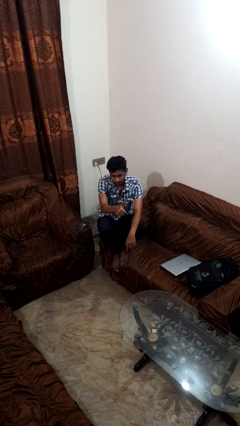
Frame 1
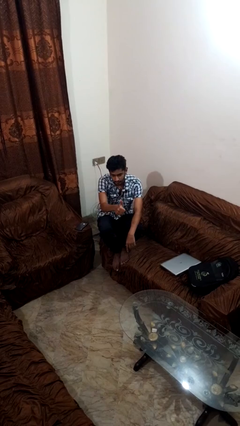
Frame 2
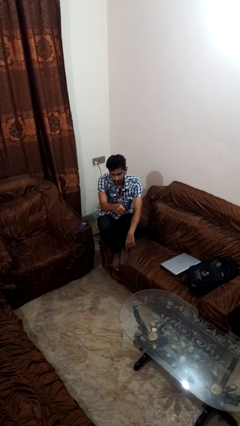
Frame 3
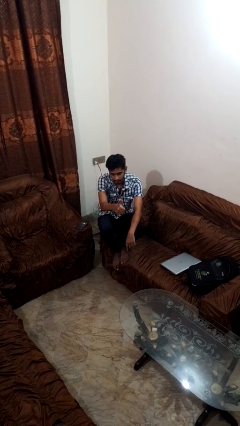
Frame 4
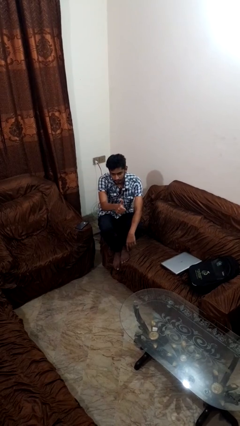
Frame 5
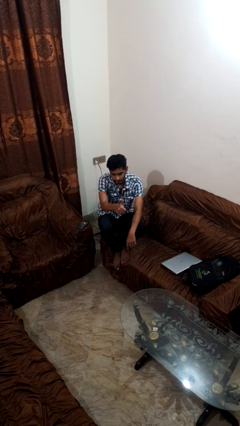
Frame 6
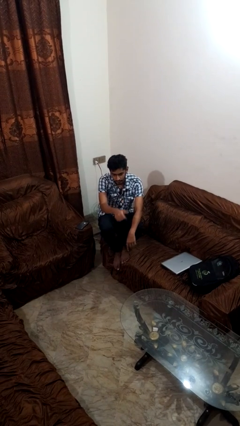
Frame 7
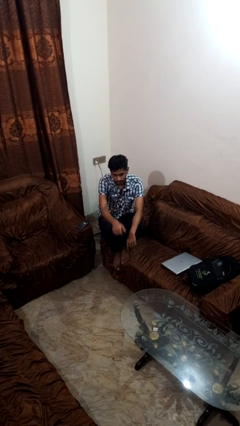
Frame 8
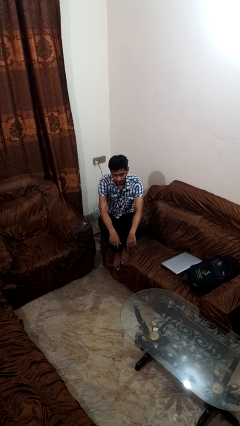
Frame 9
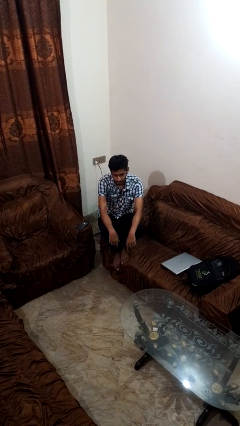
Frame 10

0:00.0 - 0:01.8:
person gestures thumbs up

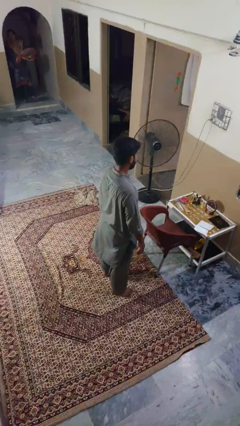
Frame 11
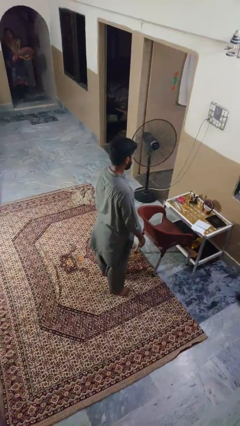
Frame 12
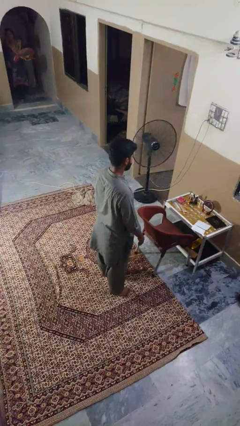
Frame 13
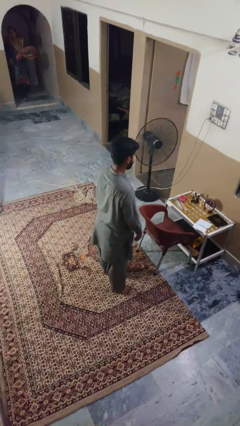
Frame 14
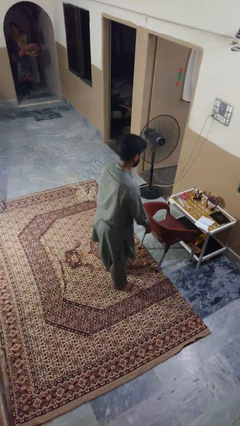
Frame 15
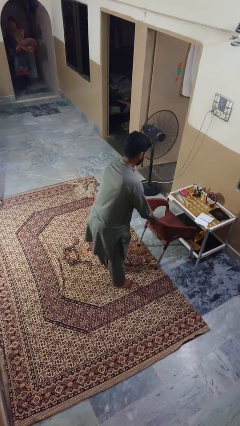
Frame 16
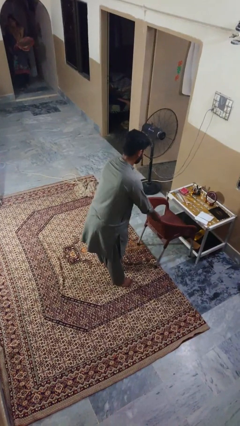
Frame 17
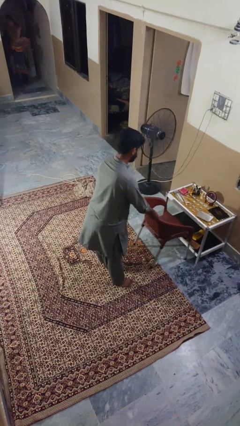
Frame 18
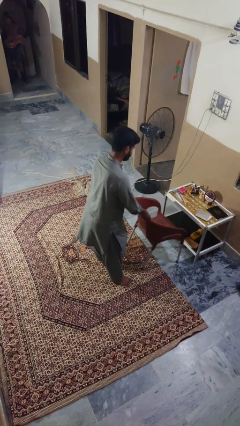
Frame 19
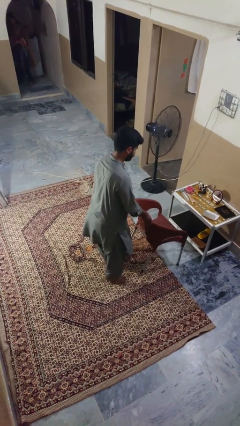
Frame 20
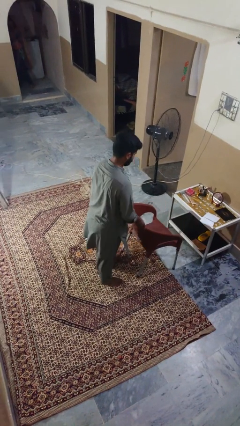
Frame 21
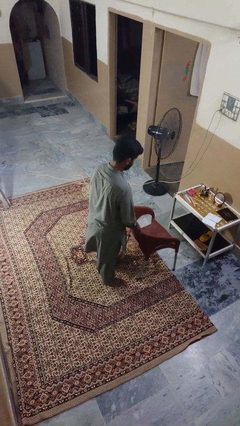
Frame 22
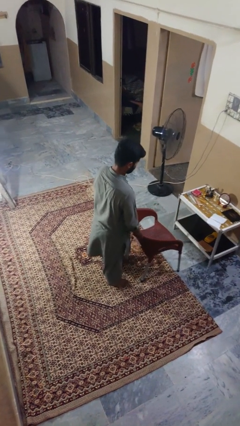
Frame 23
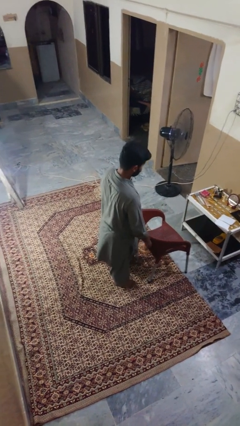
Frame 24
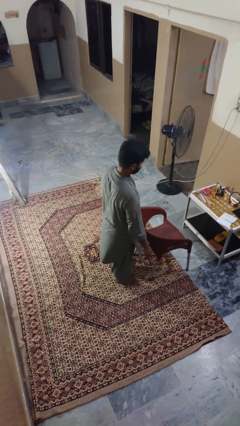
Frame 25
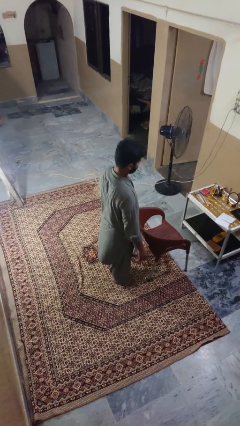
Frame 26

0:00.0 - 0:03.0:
person pulls out chair

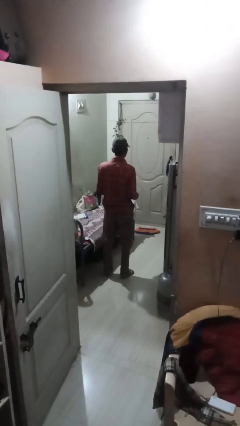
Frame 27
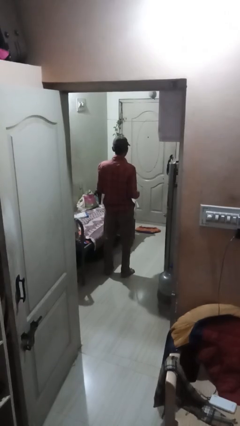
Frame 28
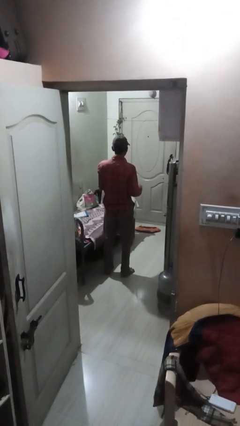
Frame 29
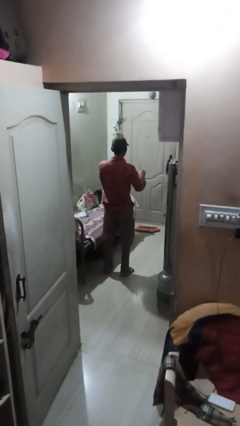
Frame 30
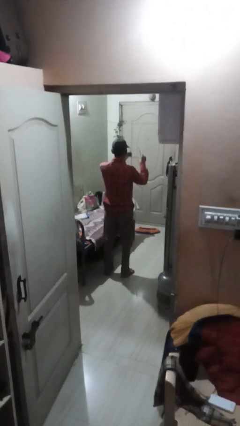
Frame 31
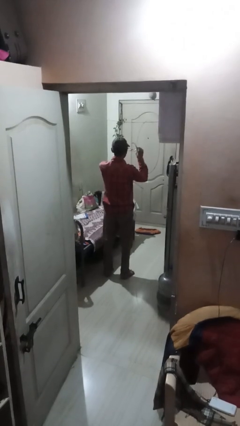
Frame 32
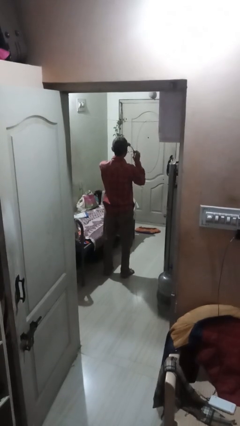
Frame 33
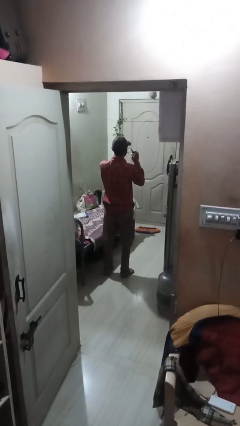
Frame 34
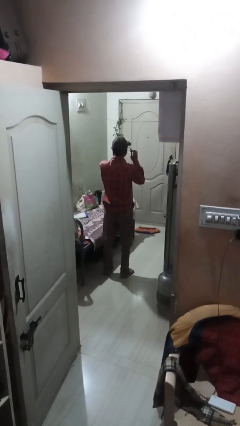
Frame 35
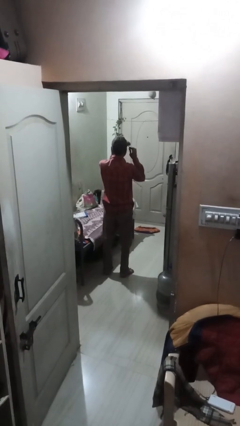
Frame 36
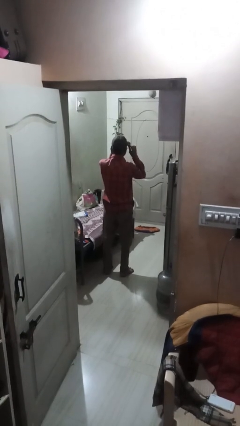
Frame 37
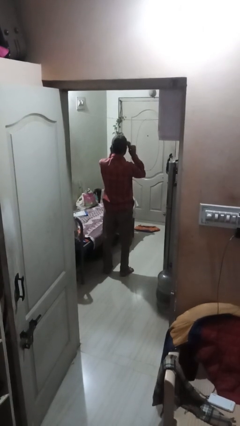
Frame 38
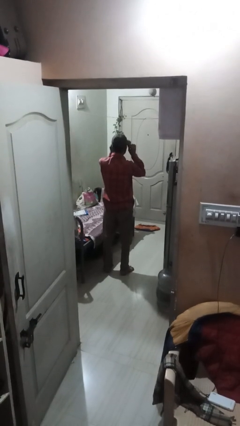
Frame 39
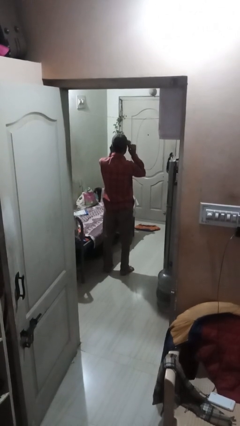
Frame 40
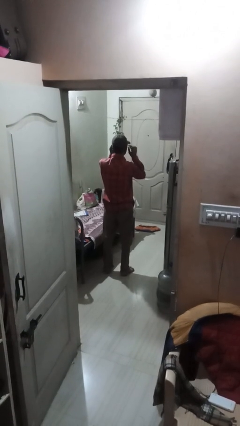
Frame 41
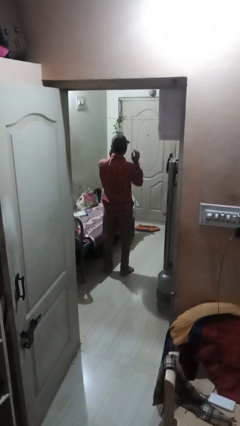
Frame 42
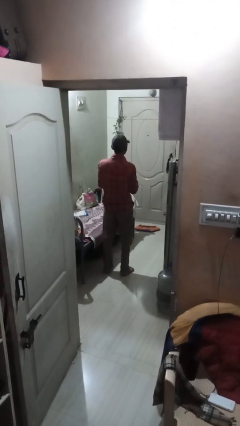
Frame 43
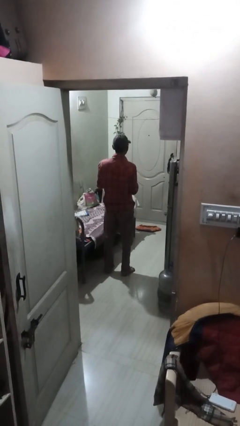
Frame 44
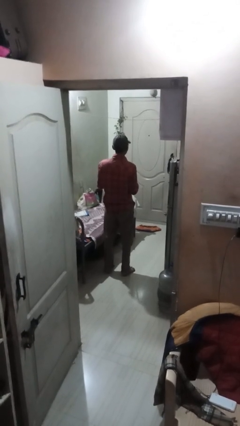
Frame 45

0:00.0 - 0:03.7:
person puts on glasses

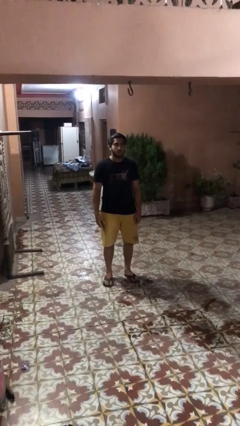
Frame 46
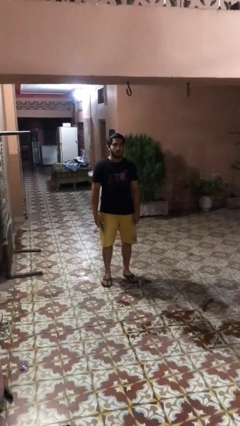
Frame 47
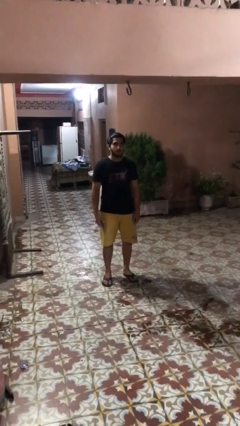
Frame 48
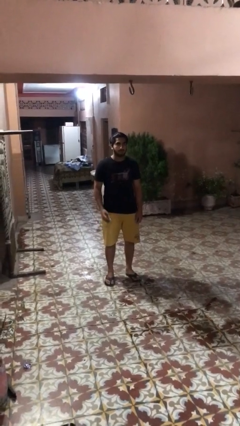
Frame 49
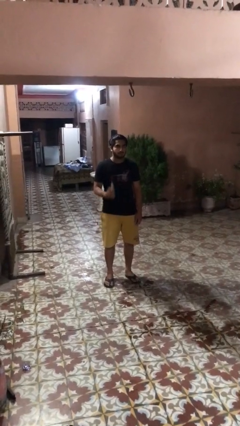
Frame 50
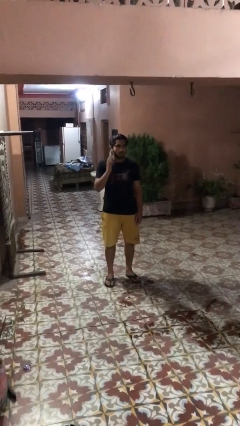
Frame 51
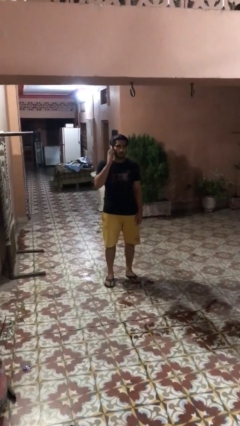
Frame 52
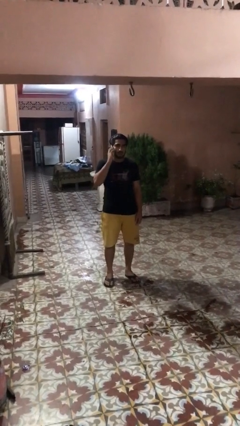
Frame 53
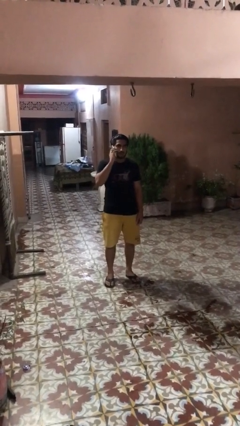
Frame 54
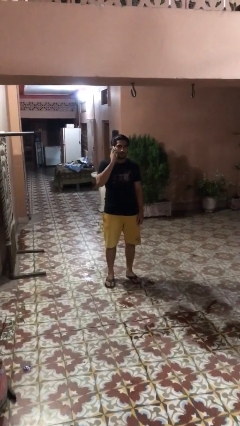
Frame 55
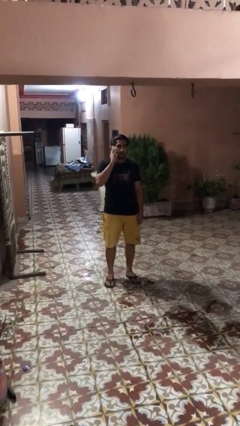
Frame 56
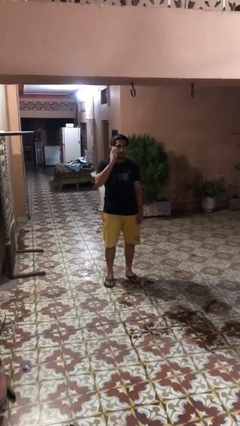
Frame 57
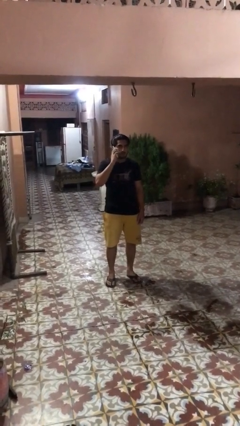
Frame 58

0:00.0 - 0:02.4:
person gestures call me

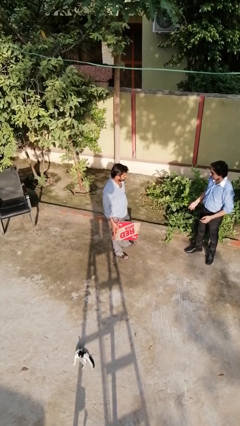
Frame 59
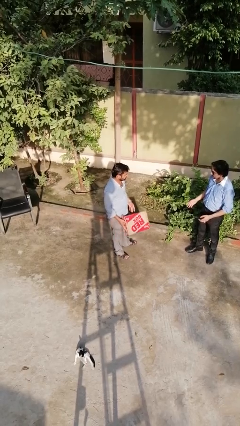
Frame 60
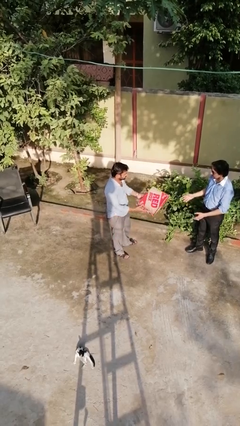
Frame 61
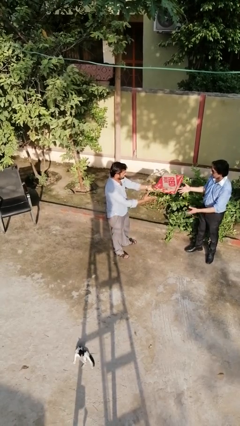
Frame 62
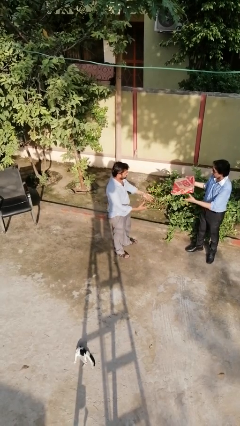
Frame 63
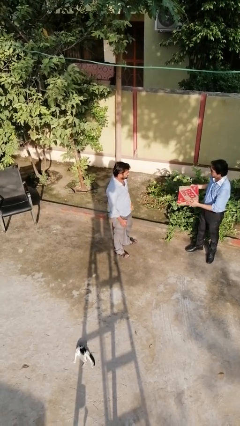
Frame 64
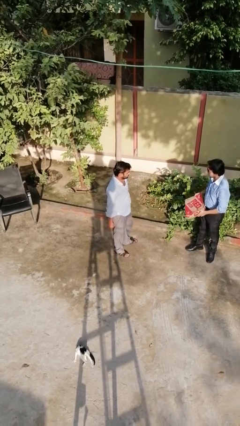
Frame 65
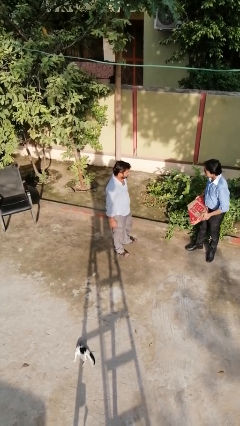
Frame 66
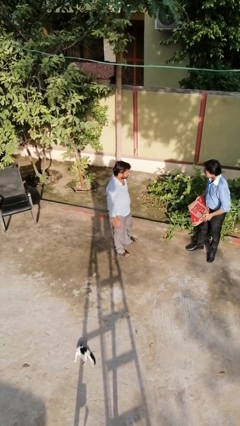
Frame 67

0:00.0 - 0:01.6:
person throws object to person

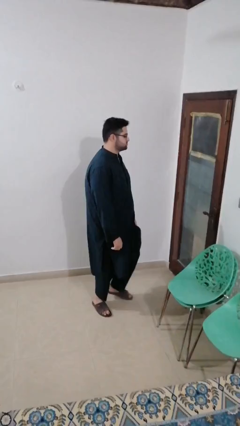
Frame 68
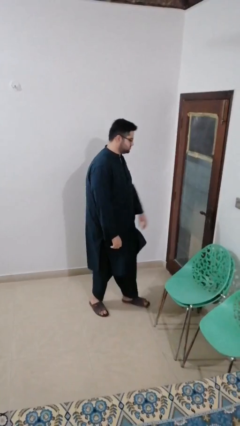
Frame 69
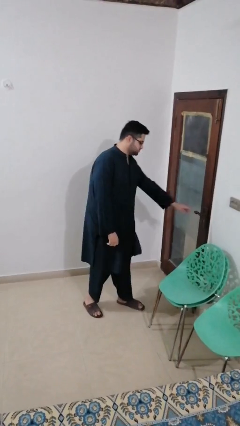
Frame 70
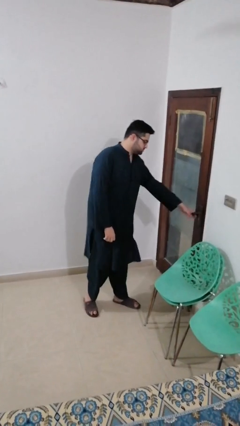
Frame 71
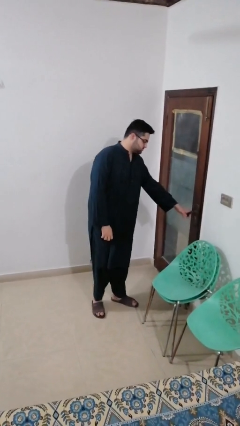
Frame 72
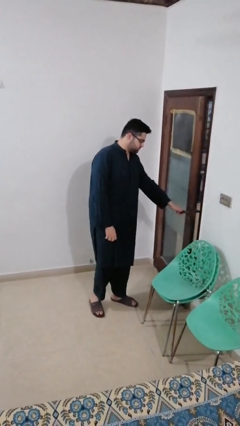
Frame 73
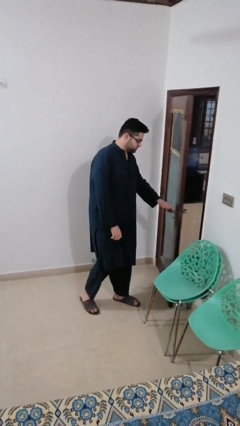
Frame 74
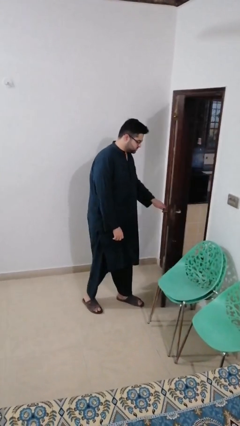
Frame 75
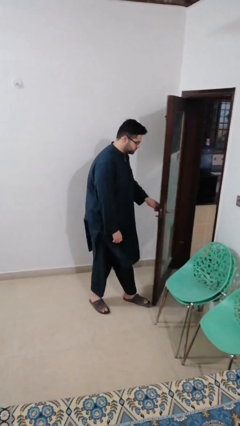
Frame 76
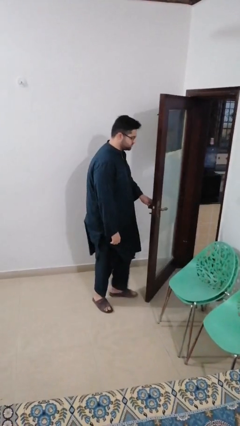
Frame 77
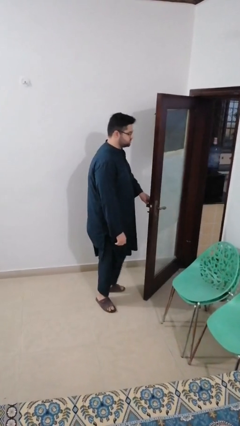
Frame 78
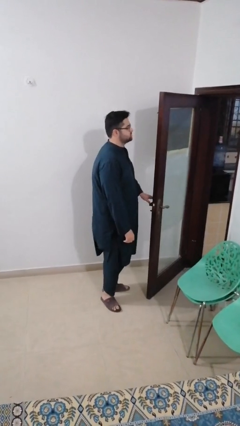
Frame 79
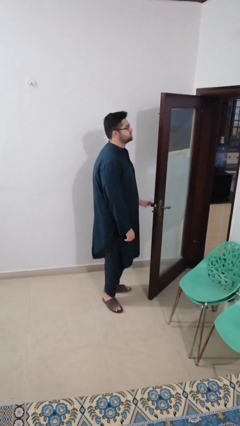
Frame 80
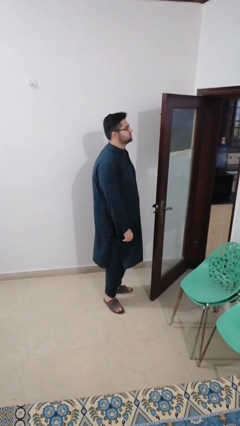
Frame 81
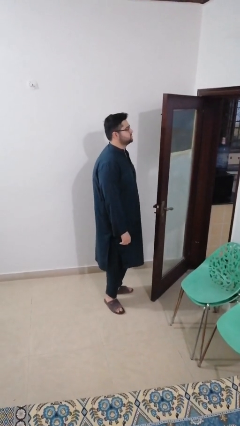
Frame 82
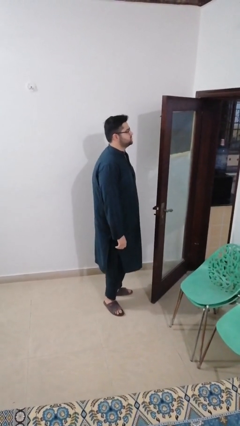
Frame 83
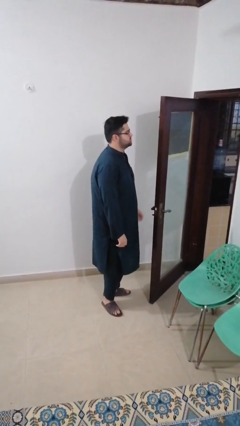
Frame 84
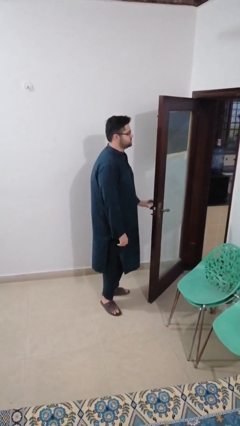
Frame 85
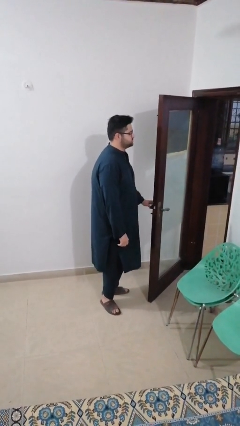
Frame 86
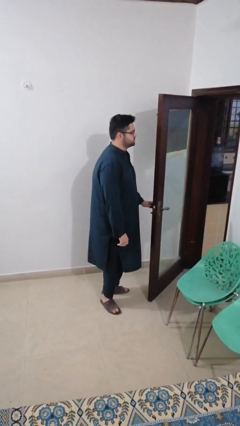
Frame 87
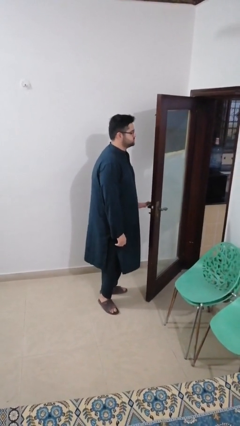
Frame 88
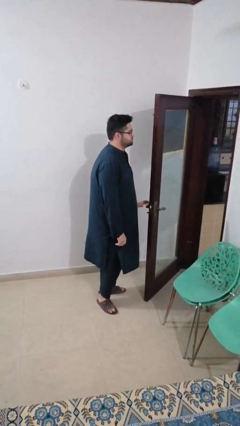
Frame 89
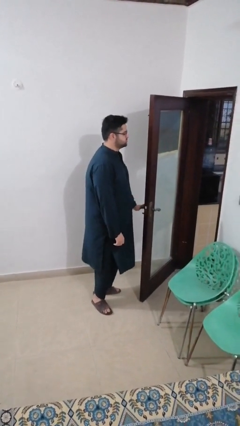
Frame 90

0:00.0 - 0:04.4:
person opens facility door
